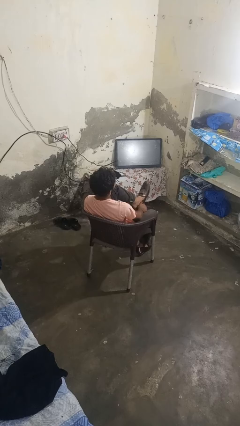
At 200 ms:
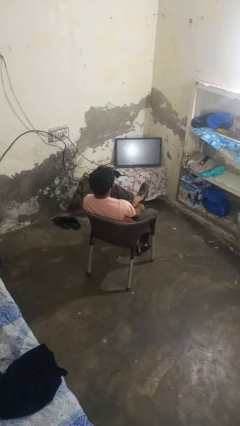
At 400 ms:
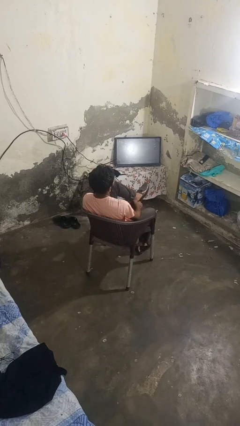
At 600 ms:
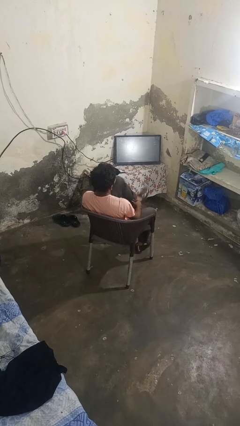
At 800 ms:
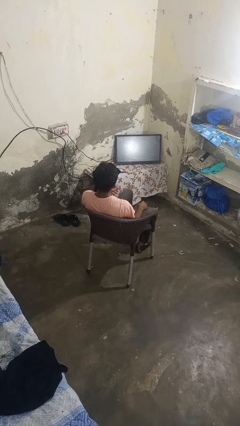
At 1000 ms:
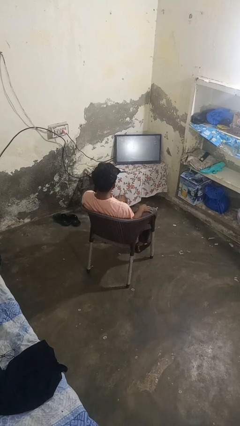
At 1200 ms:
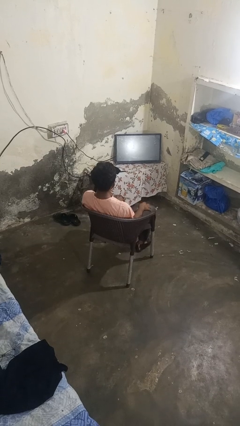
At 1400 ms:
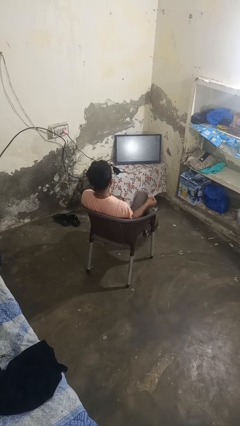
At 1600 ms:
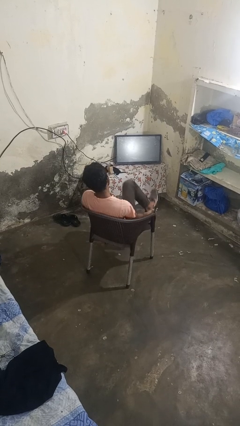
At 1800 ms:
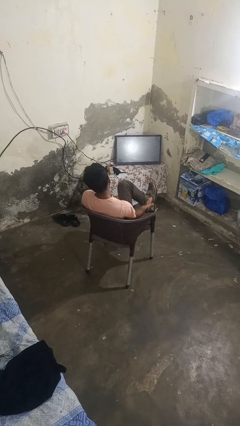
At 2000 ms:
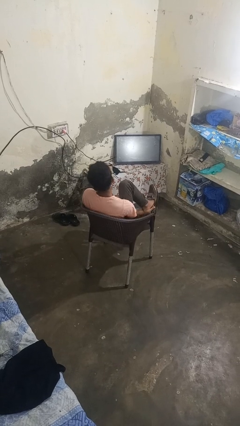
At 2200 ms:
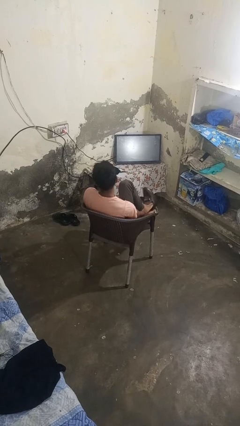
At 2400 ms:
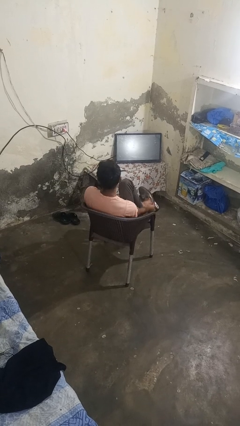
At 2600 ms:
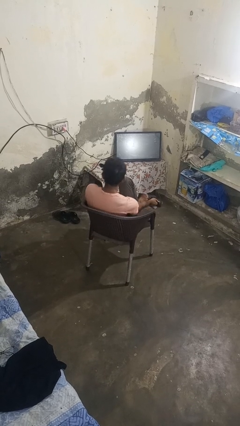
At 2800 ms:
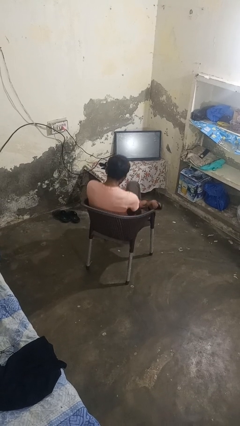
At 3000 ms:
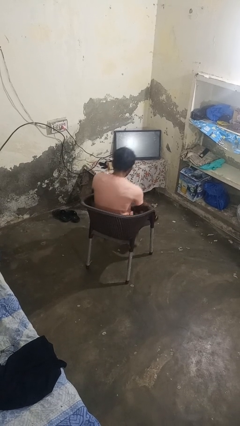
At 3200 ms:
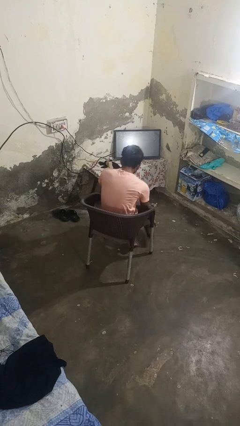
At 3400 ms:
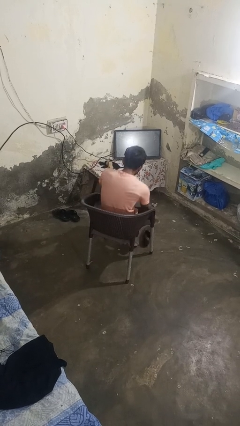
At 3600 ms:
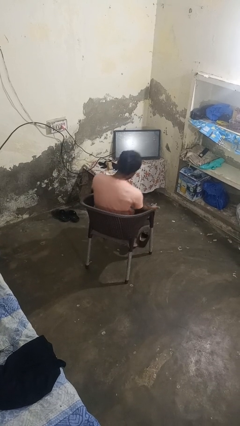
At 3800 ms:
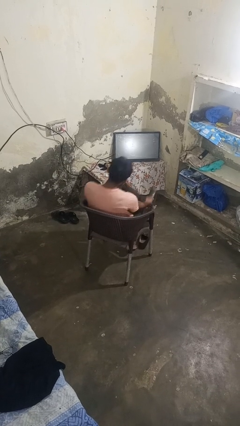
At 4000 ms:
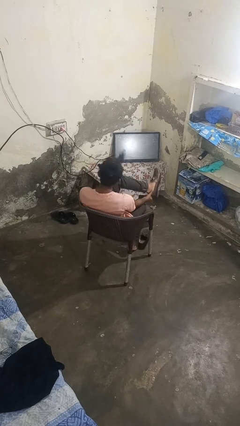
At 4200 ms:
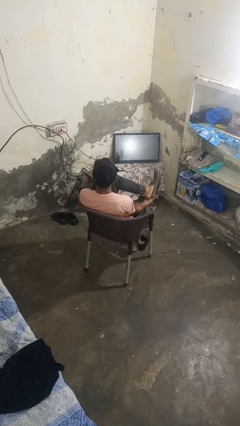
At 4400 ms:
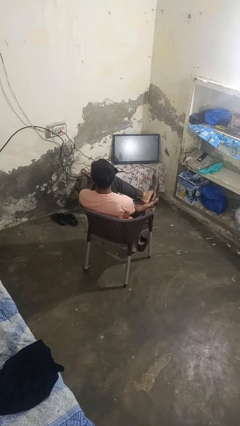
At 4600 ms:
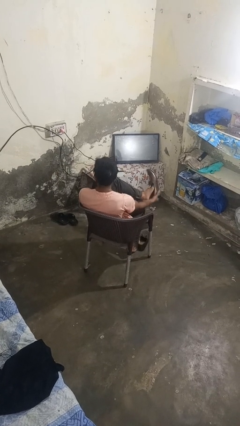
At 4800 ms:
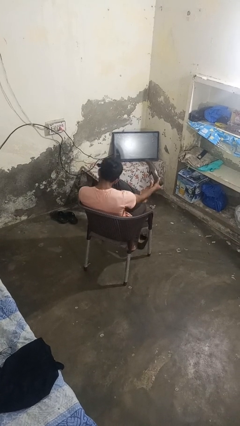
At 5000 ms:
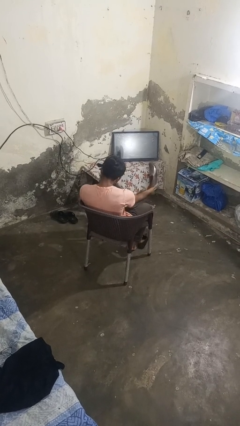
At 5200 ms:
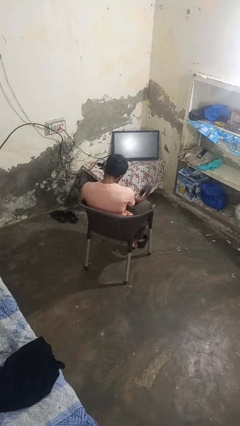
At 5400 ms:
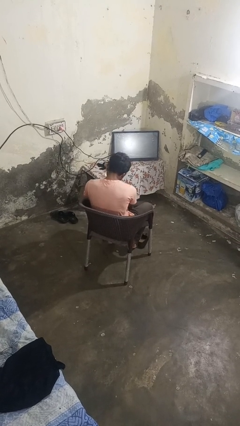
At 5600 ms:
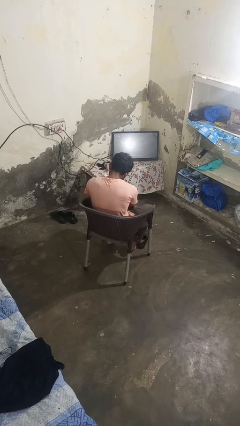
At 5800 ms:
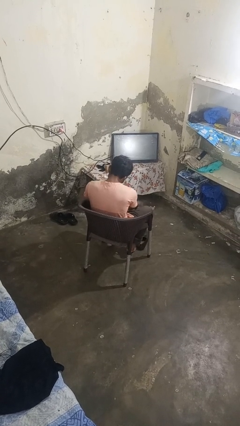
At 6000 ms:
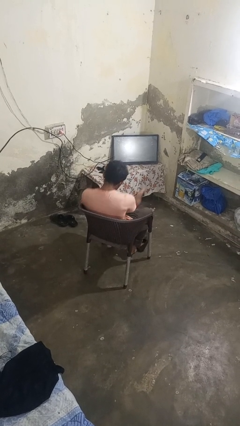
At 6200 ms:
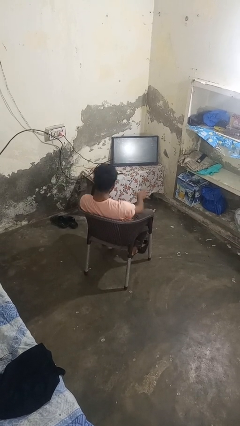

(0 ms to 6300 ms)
person takes off shoes

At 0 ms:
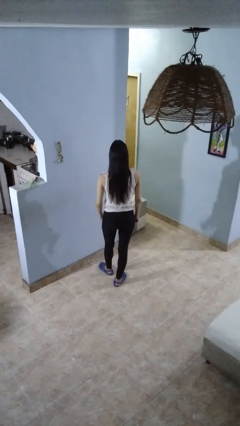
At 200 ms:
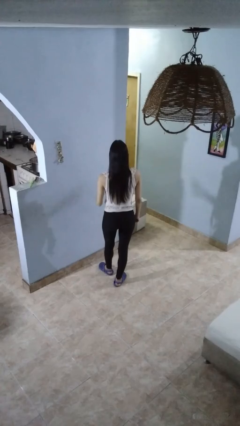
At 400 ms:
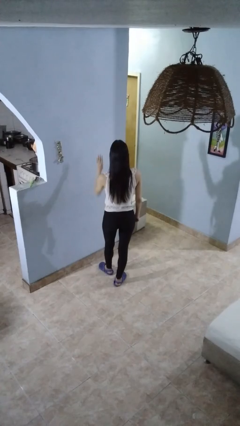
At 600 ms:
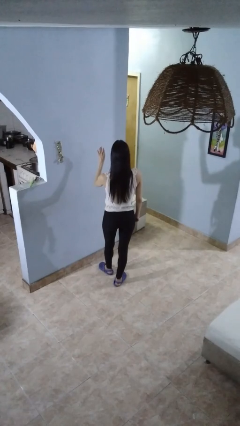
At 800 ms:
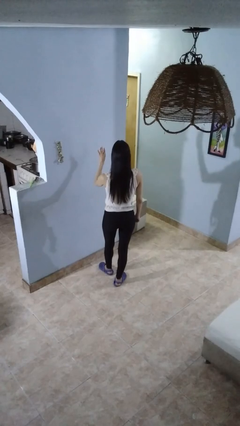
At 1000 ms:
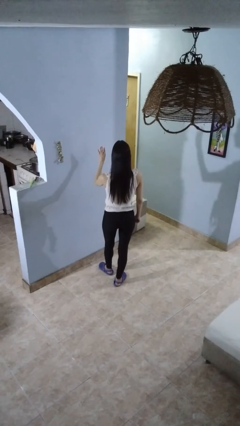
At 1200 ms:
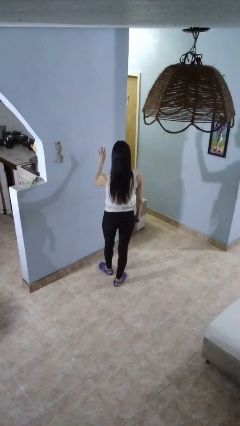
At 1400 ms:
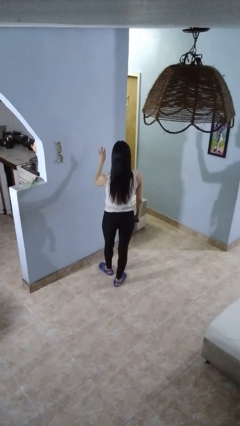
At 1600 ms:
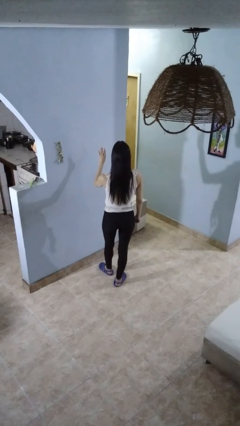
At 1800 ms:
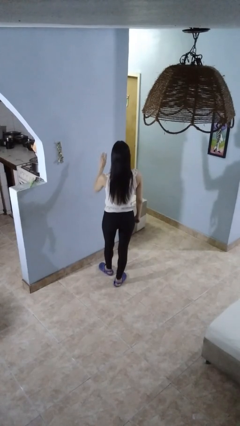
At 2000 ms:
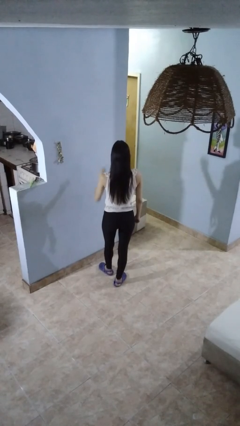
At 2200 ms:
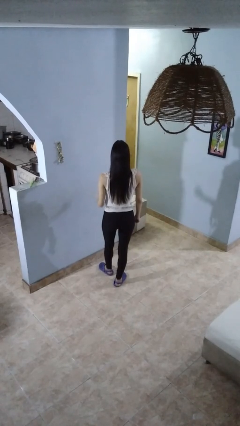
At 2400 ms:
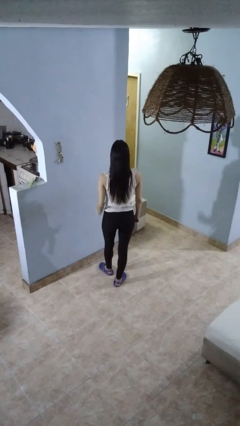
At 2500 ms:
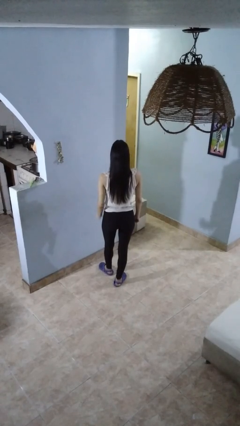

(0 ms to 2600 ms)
person gestures number four

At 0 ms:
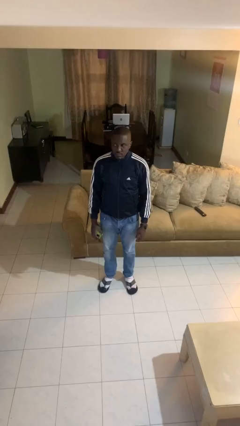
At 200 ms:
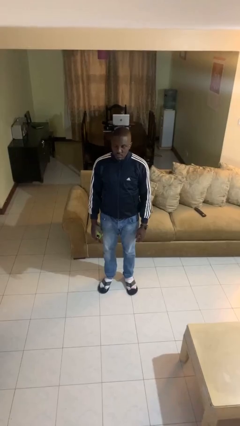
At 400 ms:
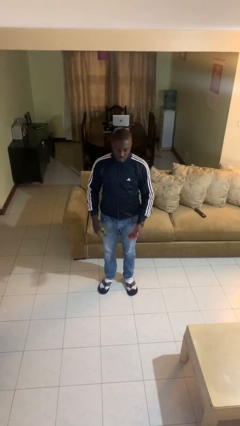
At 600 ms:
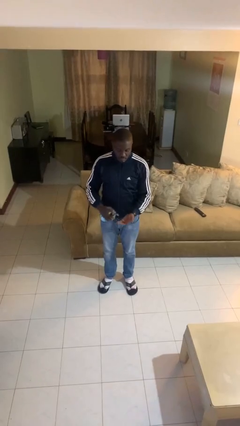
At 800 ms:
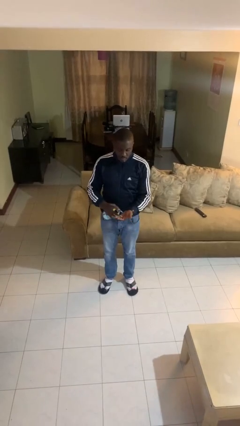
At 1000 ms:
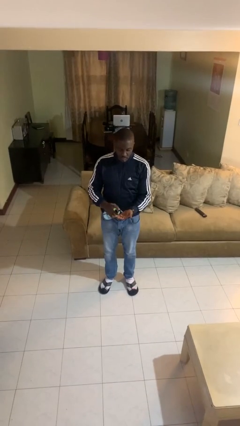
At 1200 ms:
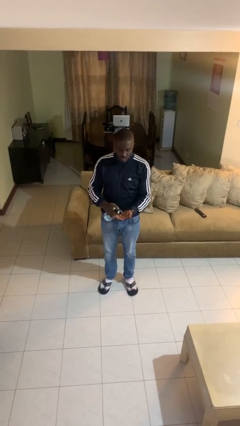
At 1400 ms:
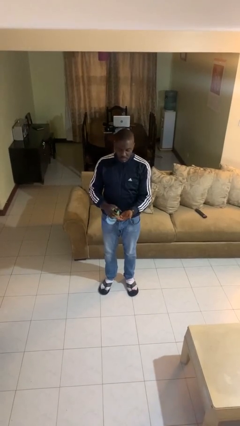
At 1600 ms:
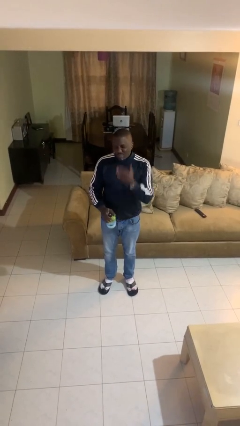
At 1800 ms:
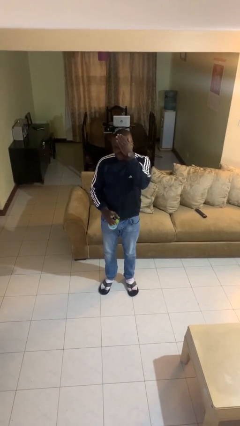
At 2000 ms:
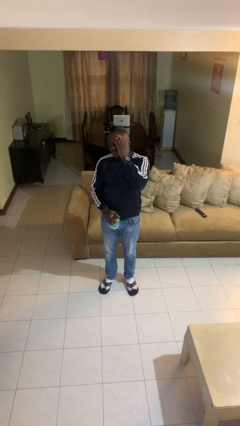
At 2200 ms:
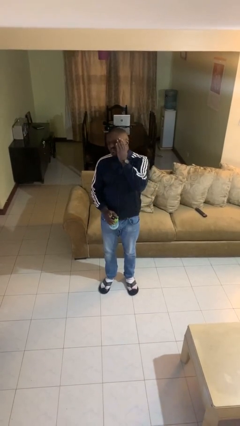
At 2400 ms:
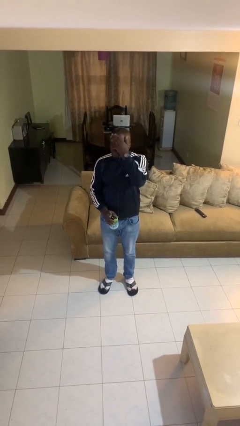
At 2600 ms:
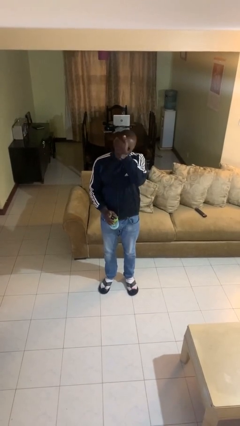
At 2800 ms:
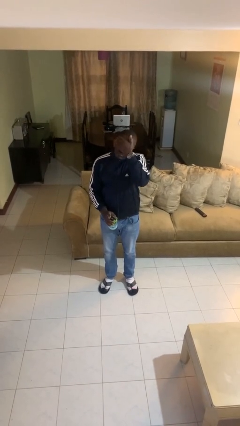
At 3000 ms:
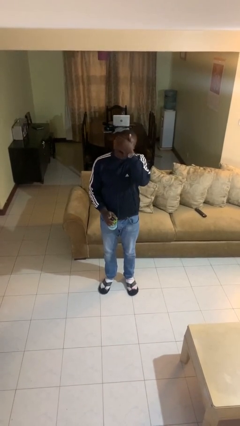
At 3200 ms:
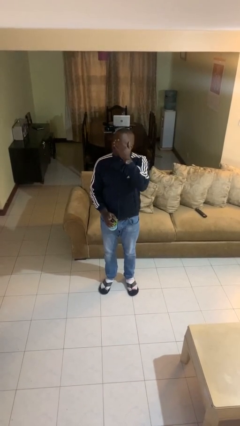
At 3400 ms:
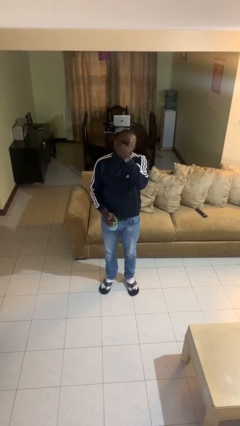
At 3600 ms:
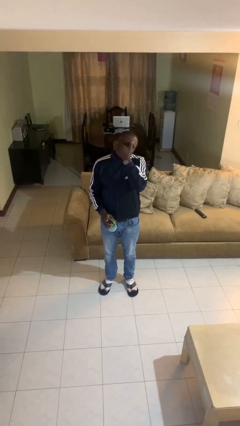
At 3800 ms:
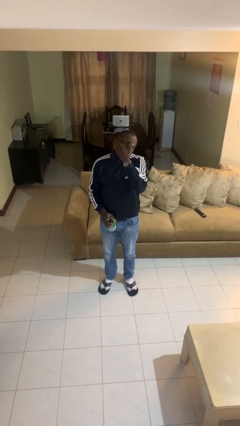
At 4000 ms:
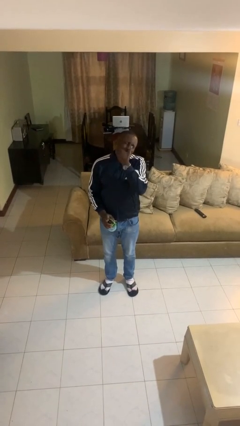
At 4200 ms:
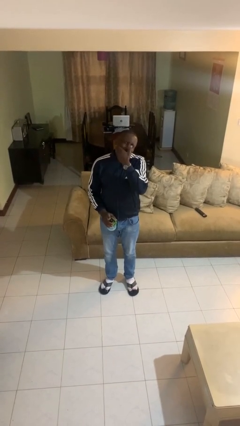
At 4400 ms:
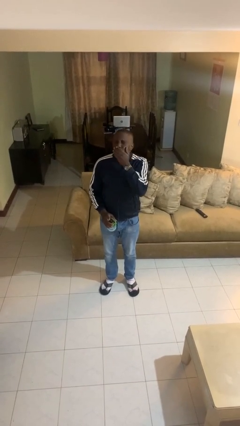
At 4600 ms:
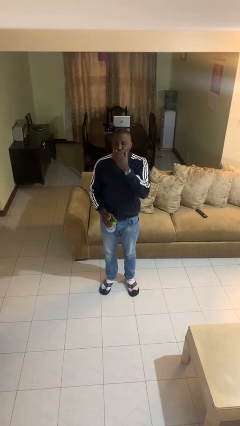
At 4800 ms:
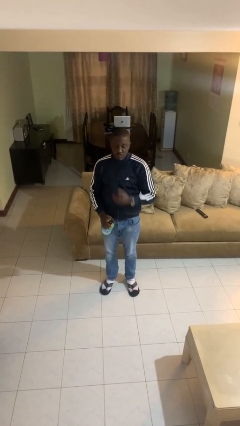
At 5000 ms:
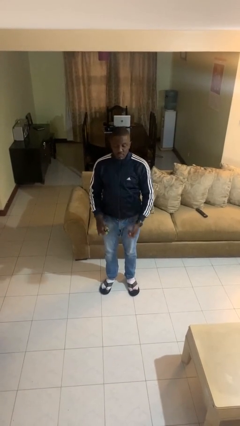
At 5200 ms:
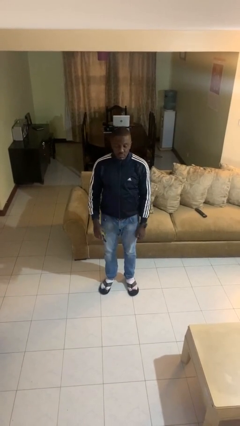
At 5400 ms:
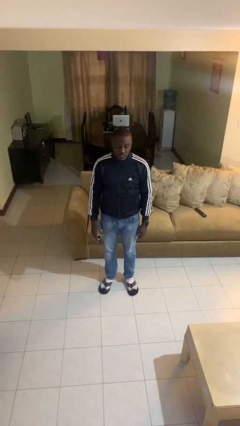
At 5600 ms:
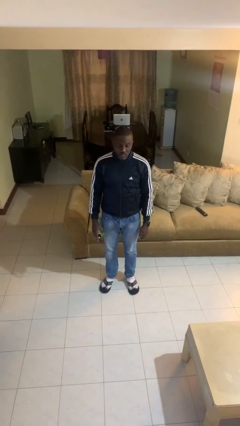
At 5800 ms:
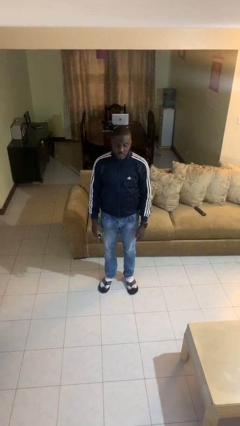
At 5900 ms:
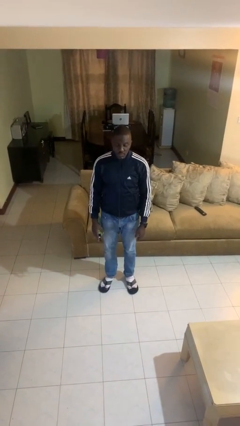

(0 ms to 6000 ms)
person applies facial moisturizer

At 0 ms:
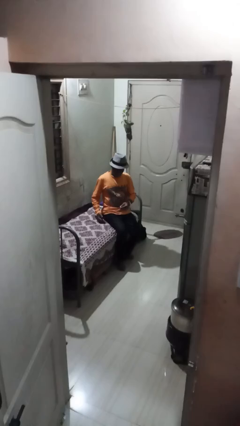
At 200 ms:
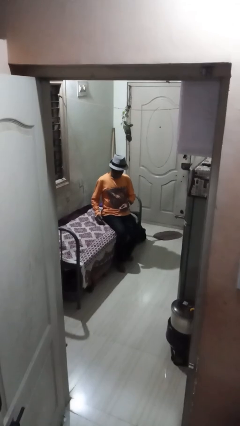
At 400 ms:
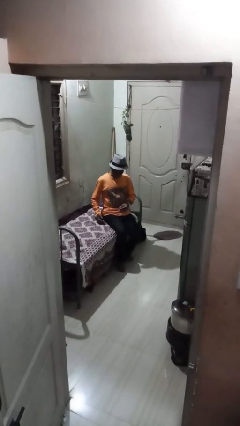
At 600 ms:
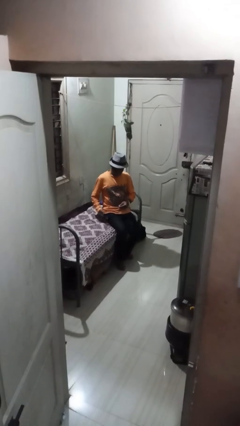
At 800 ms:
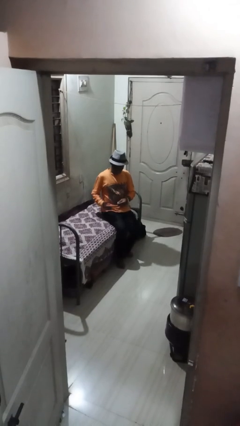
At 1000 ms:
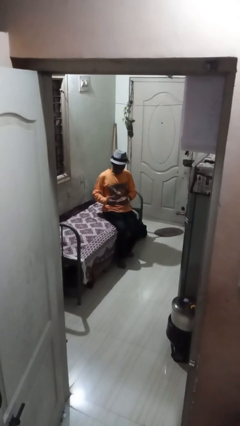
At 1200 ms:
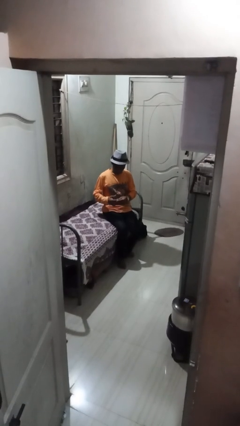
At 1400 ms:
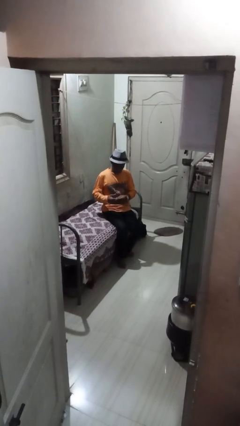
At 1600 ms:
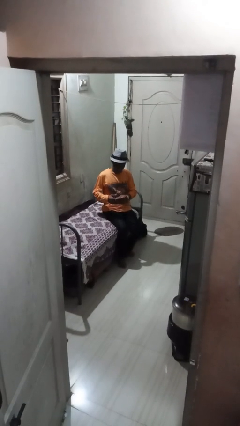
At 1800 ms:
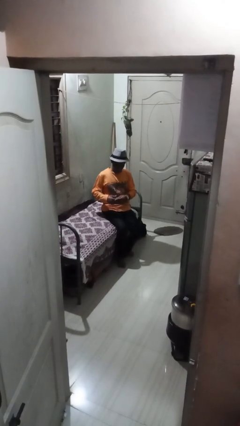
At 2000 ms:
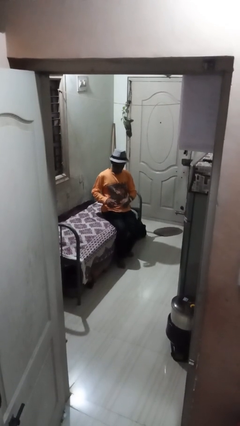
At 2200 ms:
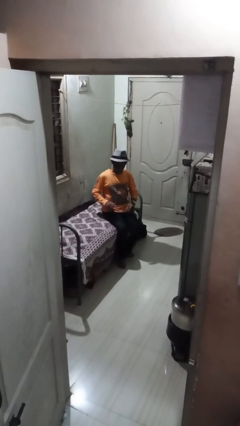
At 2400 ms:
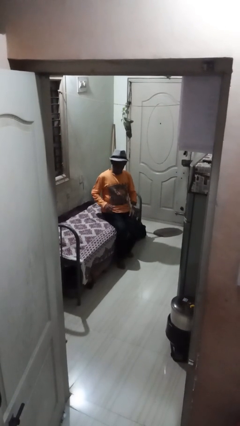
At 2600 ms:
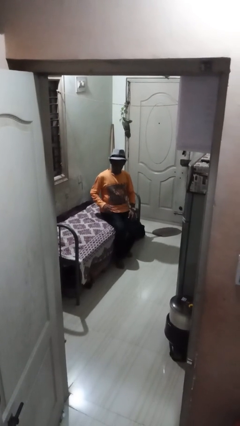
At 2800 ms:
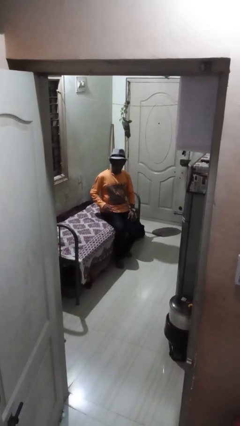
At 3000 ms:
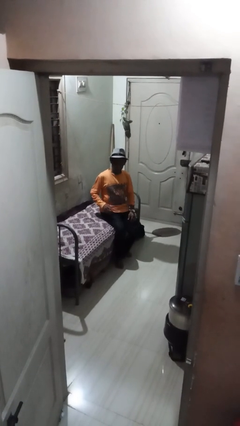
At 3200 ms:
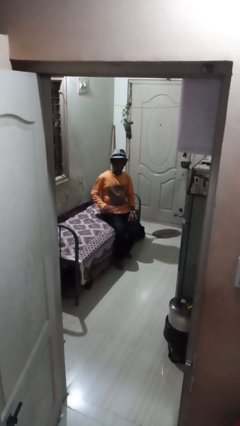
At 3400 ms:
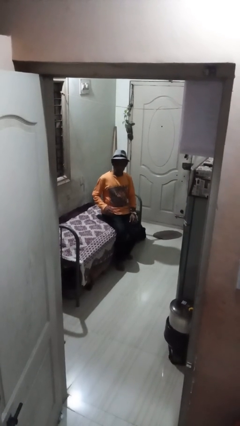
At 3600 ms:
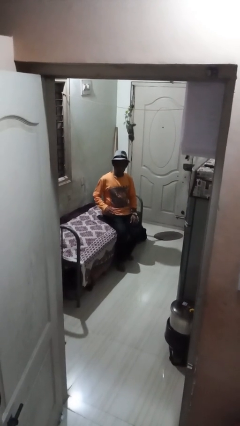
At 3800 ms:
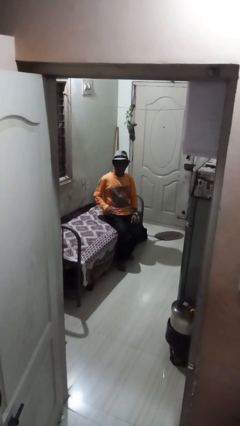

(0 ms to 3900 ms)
person puts on ring
